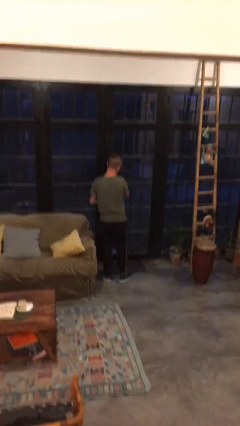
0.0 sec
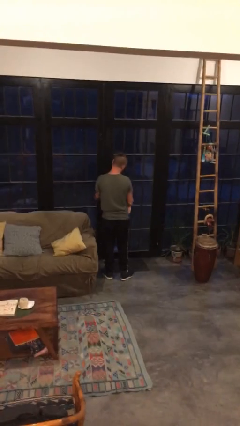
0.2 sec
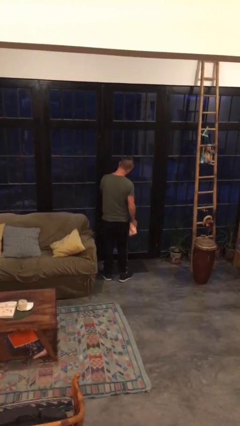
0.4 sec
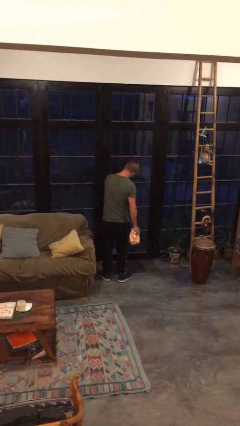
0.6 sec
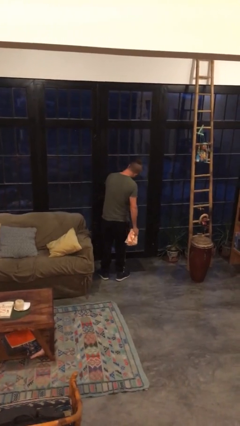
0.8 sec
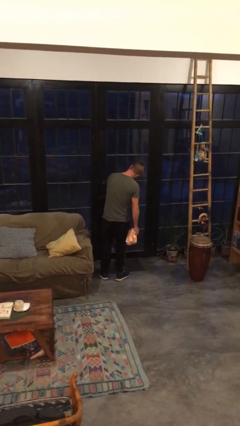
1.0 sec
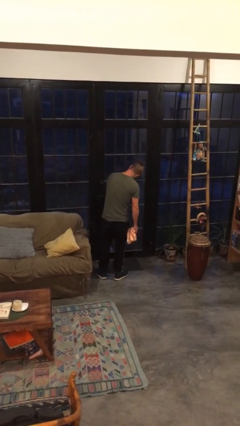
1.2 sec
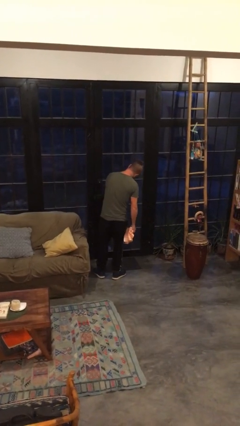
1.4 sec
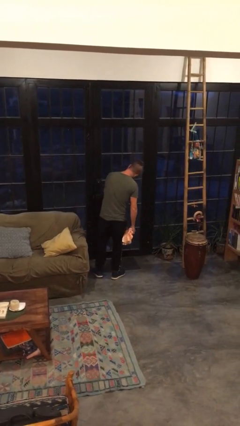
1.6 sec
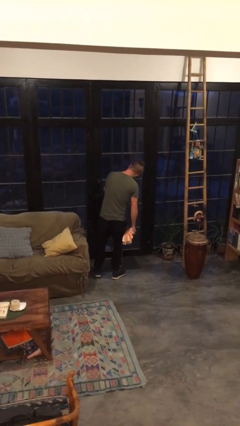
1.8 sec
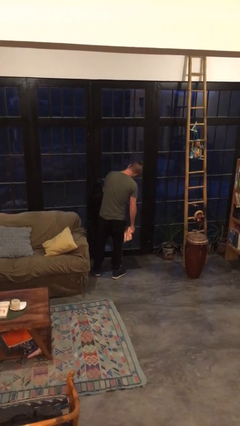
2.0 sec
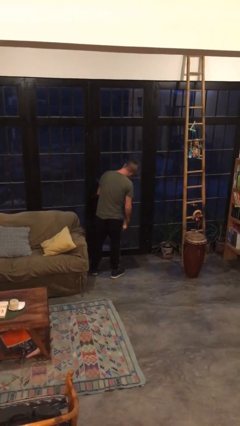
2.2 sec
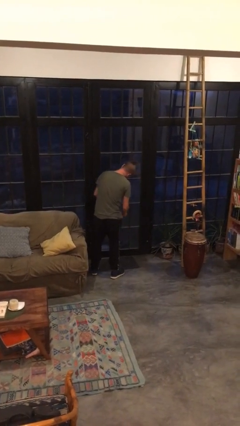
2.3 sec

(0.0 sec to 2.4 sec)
person sprays from bottle

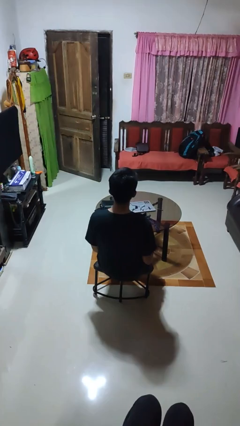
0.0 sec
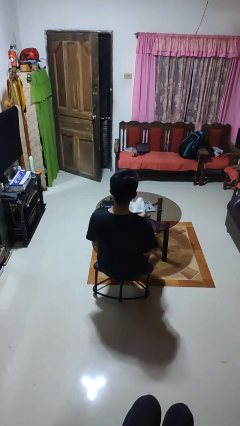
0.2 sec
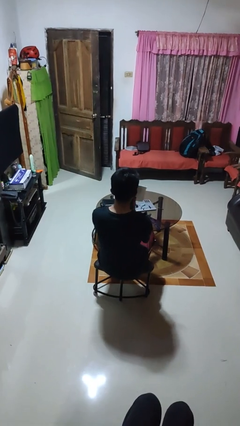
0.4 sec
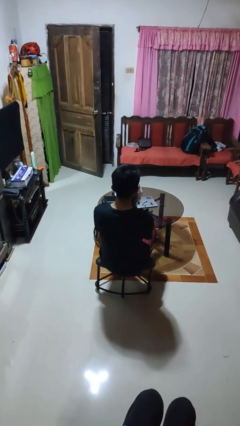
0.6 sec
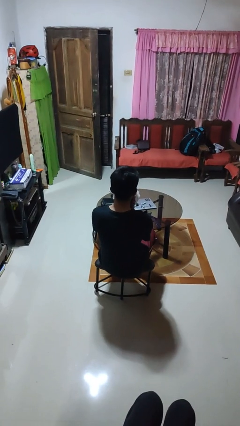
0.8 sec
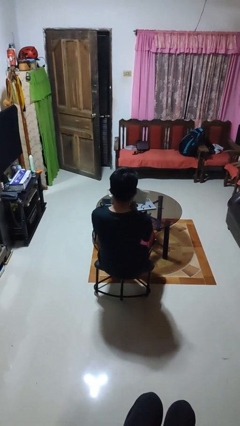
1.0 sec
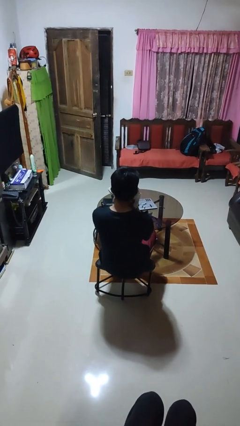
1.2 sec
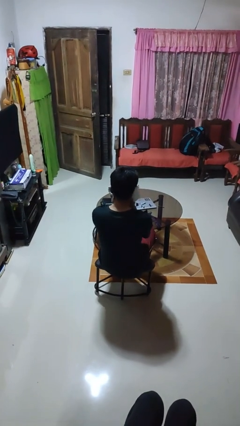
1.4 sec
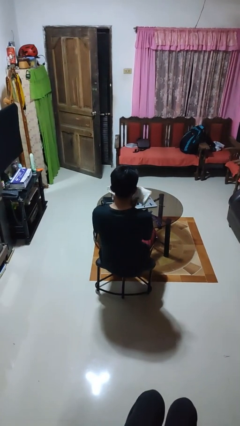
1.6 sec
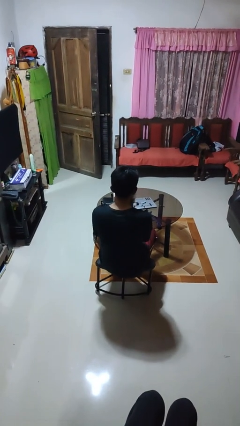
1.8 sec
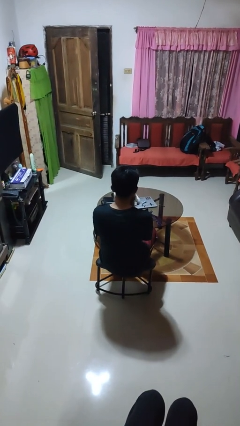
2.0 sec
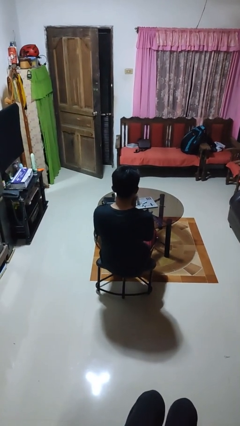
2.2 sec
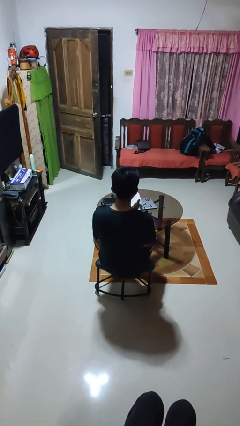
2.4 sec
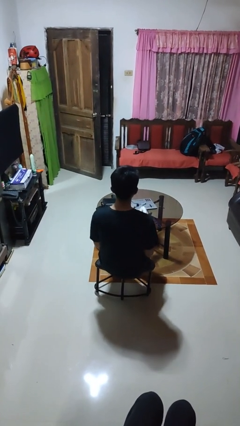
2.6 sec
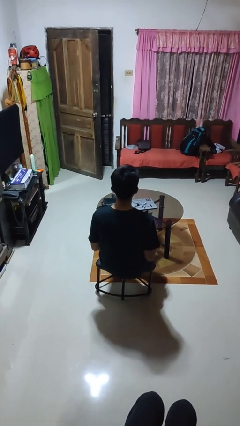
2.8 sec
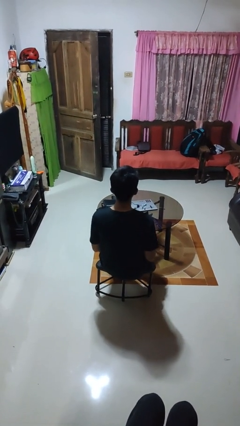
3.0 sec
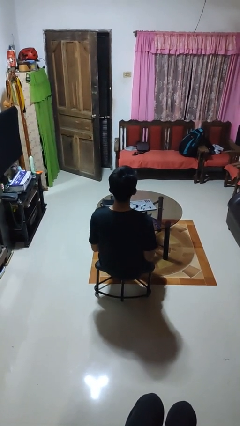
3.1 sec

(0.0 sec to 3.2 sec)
person wipes mouth with napkin

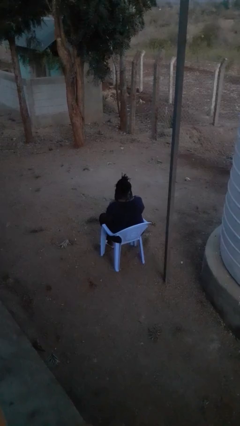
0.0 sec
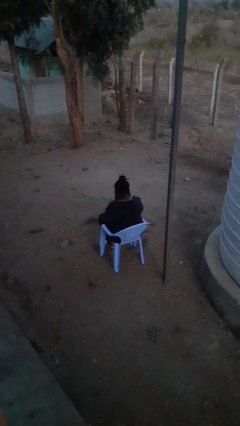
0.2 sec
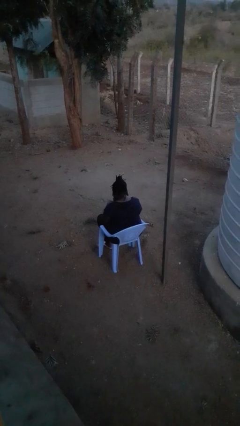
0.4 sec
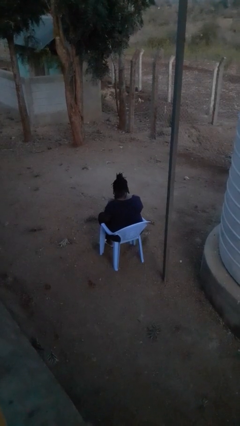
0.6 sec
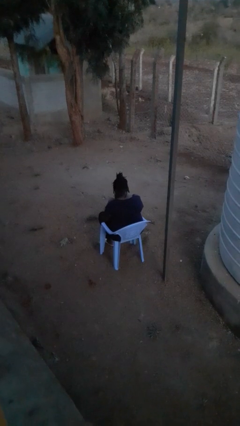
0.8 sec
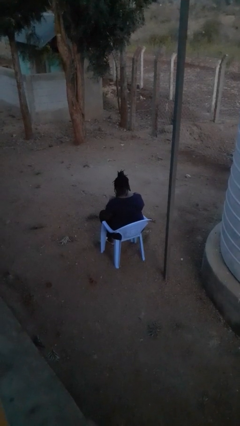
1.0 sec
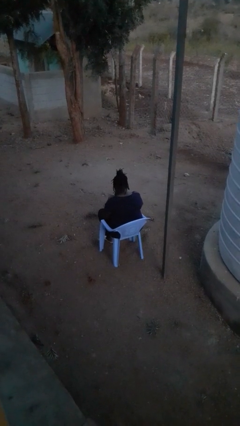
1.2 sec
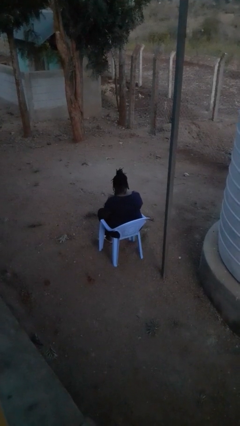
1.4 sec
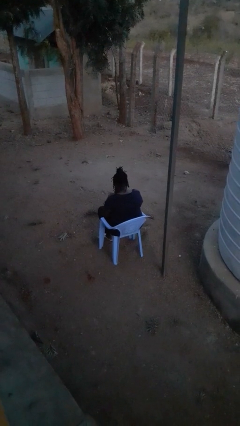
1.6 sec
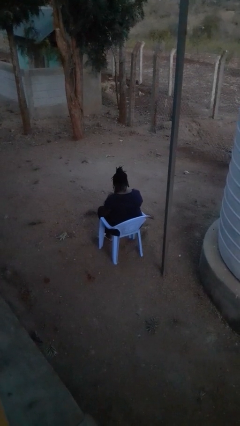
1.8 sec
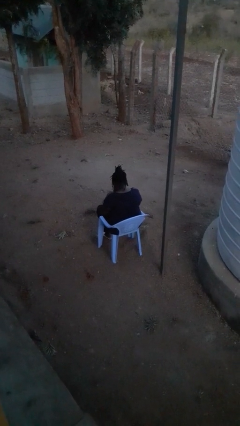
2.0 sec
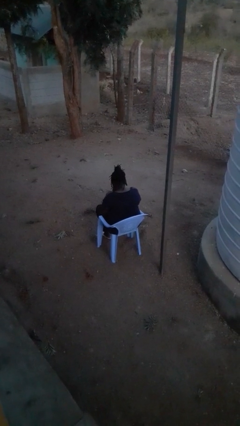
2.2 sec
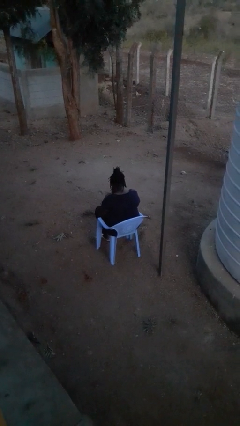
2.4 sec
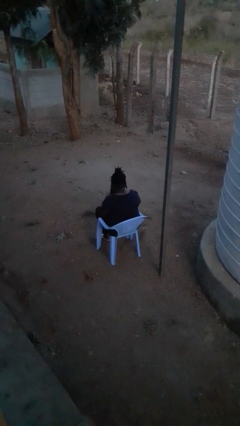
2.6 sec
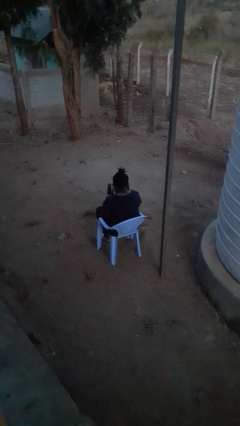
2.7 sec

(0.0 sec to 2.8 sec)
person prays

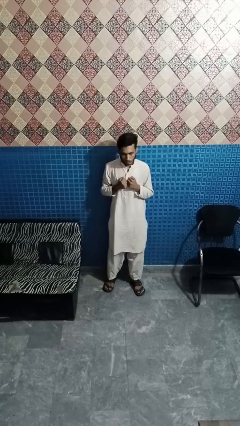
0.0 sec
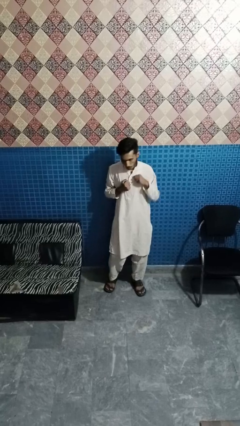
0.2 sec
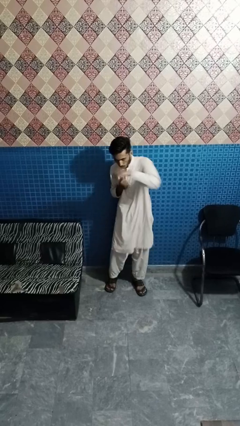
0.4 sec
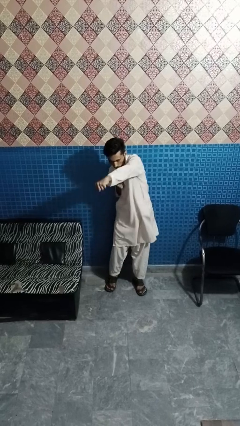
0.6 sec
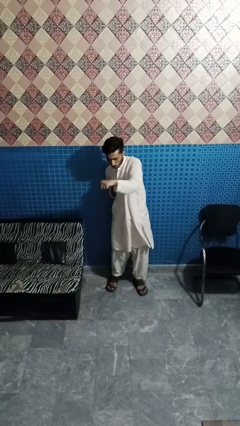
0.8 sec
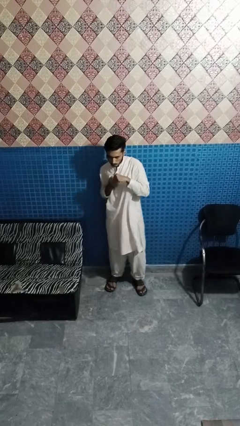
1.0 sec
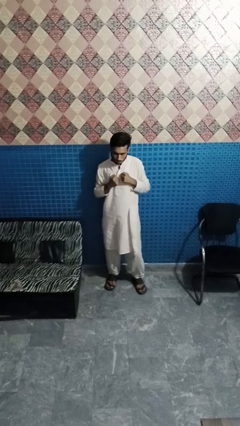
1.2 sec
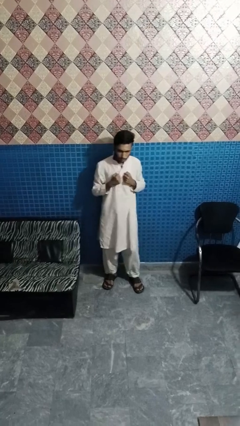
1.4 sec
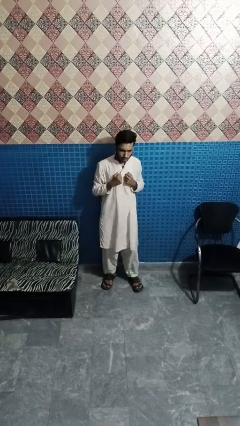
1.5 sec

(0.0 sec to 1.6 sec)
person punches

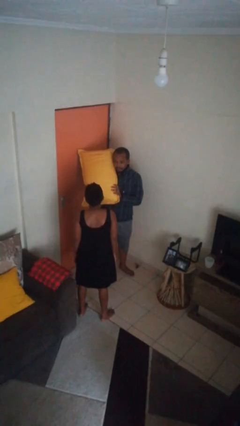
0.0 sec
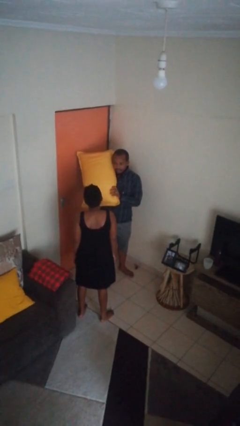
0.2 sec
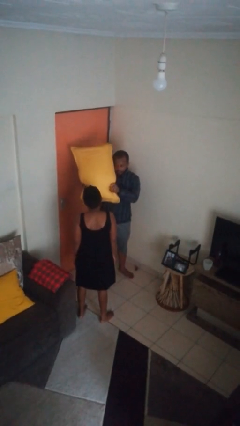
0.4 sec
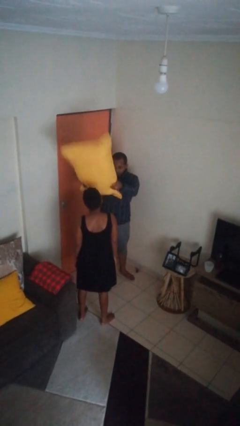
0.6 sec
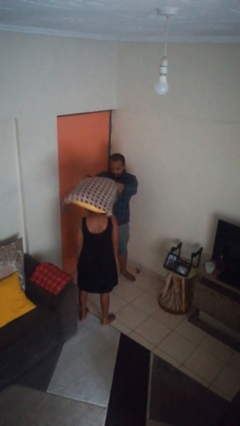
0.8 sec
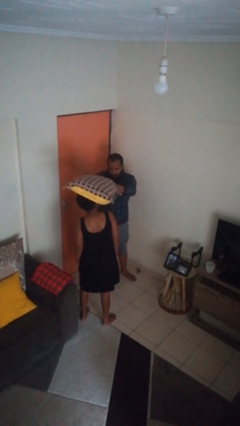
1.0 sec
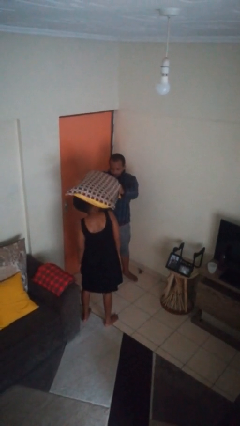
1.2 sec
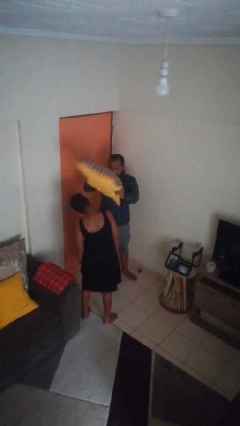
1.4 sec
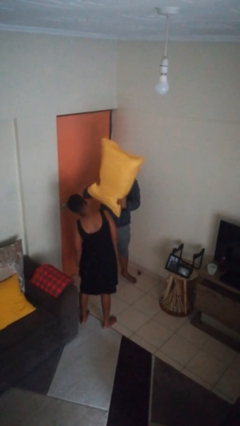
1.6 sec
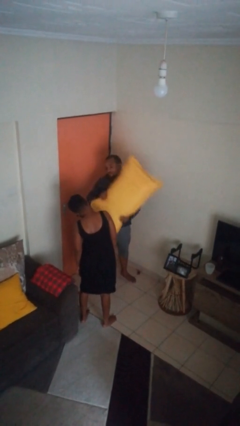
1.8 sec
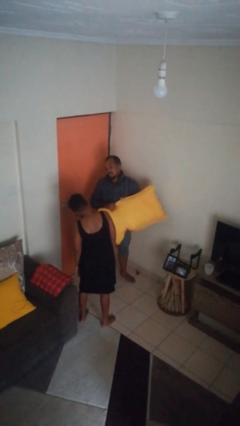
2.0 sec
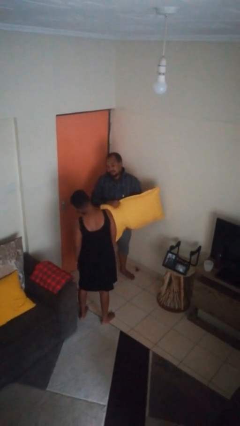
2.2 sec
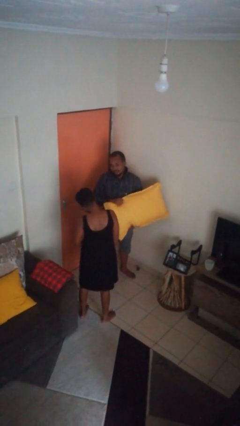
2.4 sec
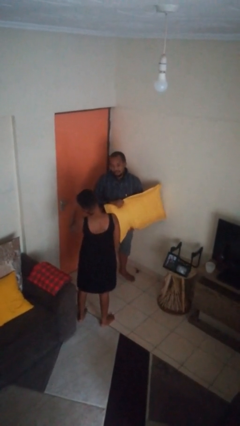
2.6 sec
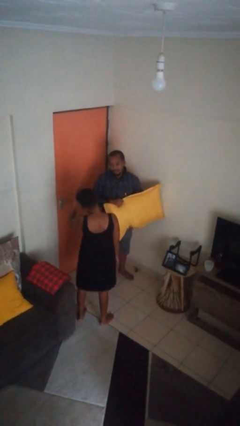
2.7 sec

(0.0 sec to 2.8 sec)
person hits person with pillow

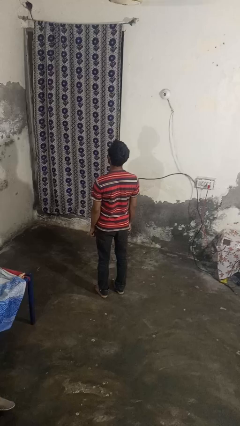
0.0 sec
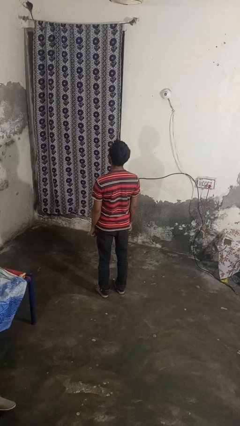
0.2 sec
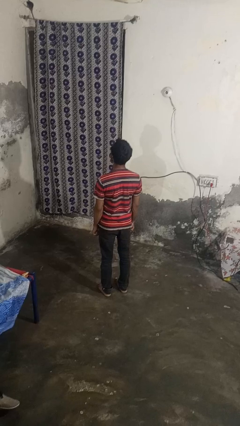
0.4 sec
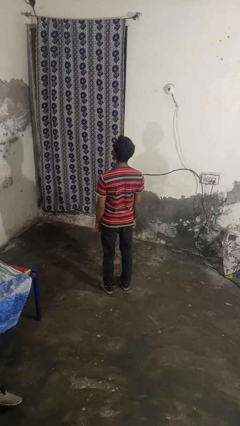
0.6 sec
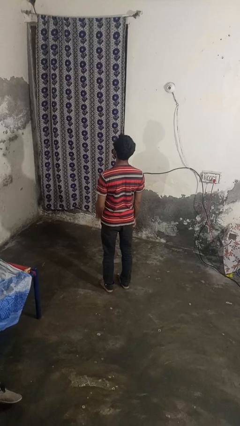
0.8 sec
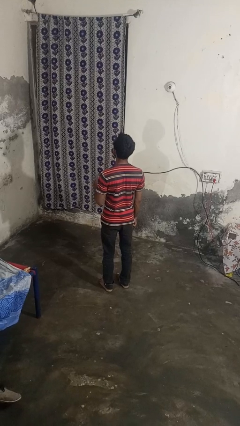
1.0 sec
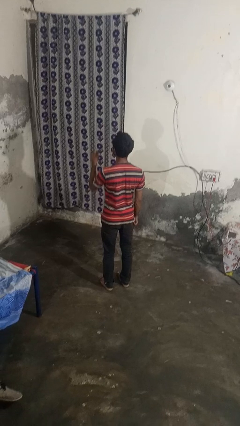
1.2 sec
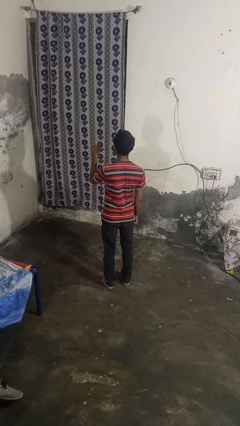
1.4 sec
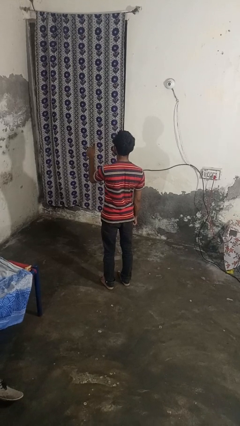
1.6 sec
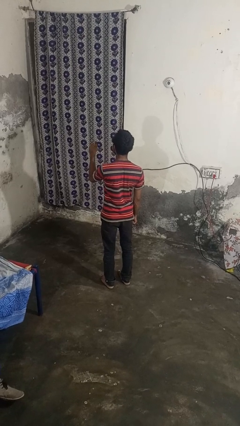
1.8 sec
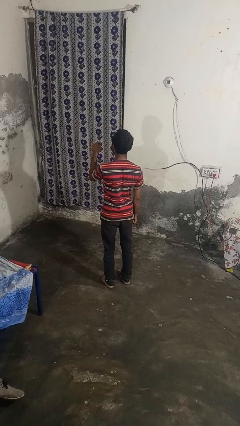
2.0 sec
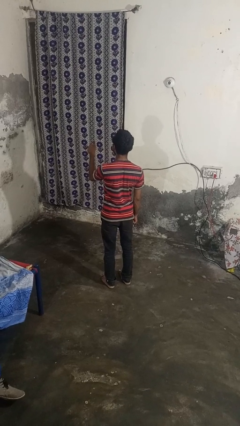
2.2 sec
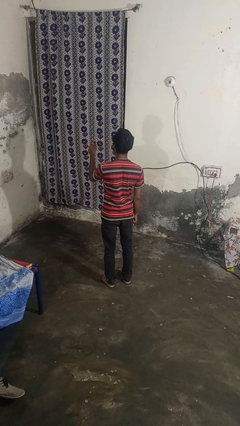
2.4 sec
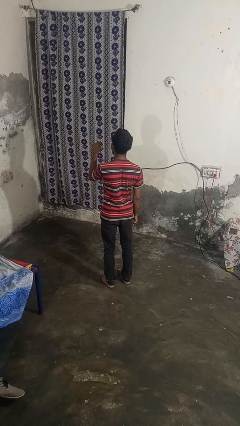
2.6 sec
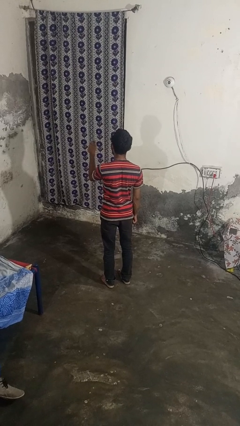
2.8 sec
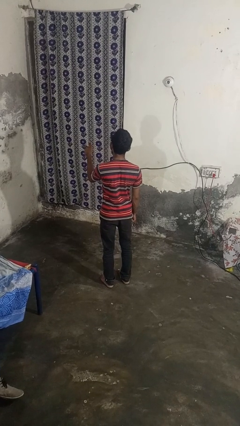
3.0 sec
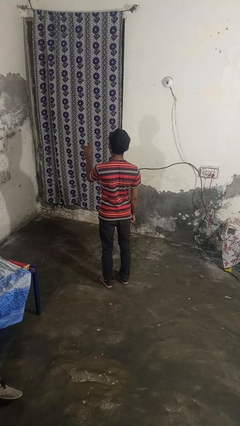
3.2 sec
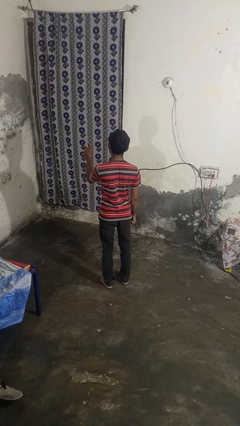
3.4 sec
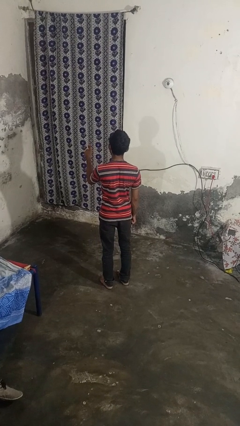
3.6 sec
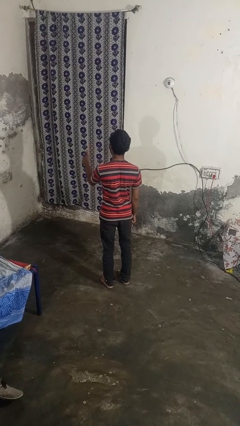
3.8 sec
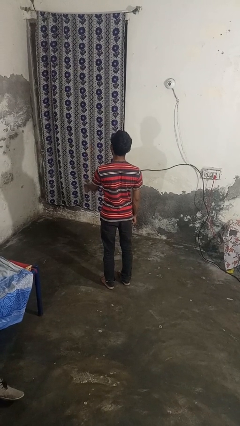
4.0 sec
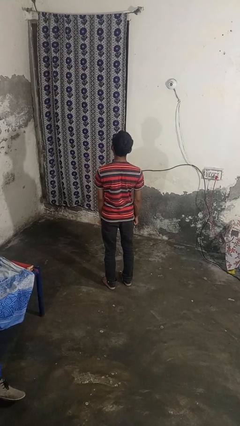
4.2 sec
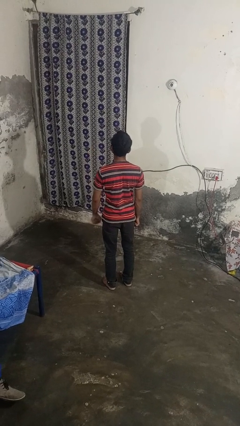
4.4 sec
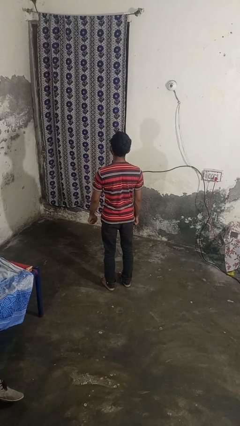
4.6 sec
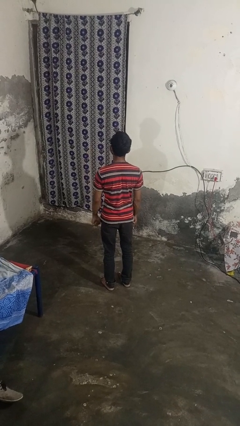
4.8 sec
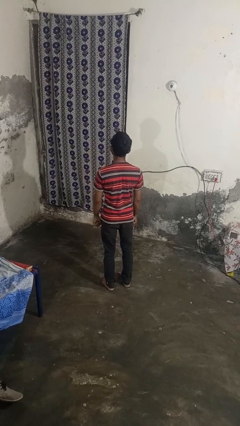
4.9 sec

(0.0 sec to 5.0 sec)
person gestures thumbs up
